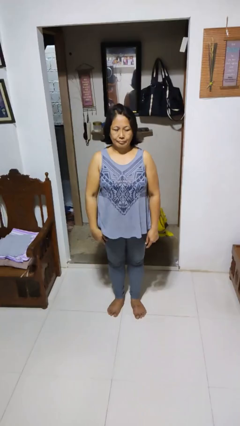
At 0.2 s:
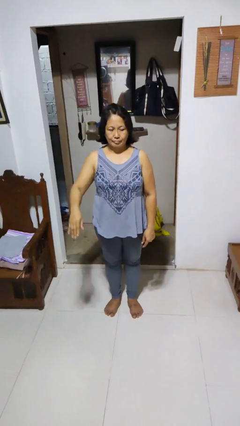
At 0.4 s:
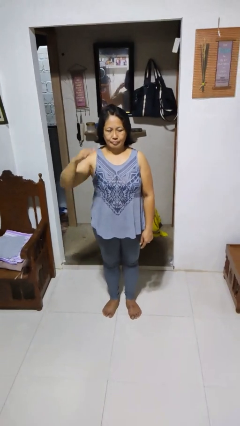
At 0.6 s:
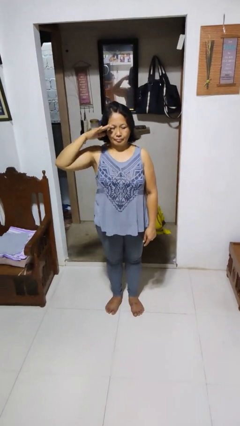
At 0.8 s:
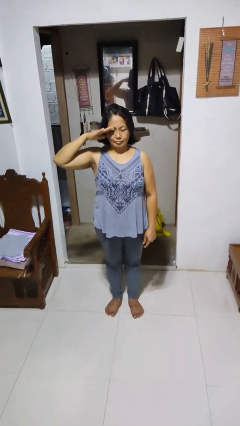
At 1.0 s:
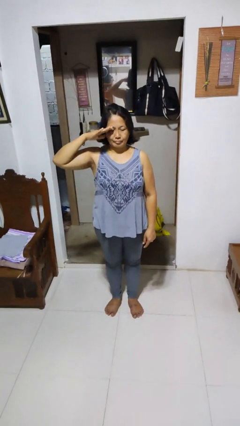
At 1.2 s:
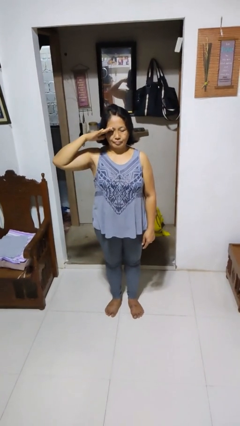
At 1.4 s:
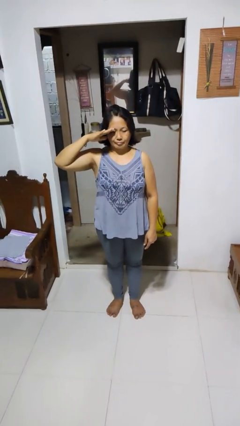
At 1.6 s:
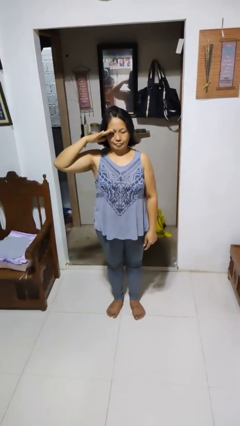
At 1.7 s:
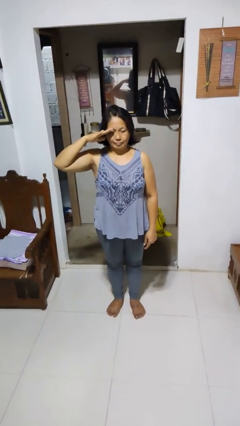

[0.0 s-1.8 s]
person salutes

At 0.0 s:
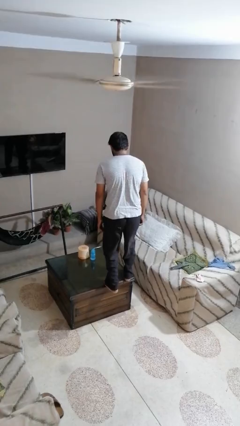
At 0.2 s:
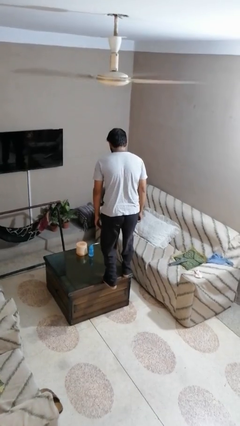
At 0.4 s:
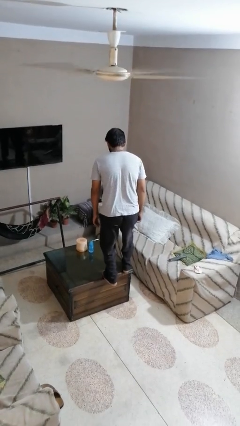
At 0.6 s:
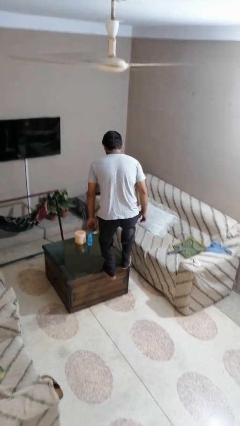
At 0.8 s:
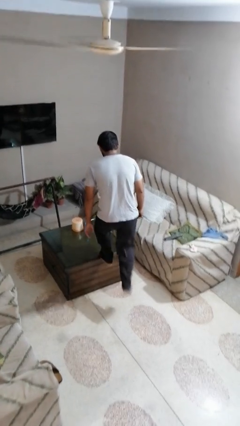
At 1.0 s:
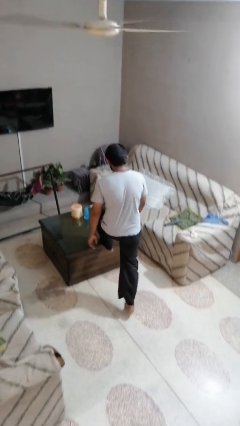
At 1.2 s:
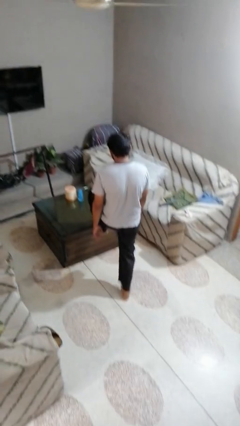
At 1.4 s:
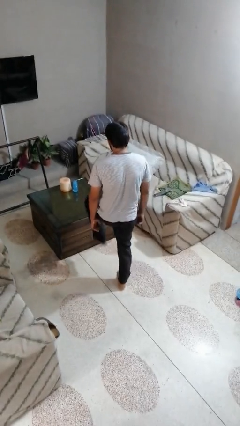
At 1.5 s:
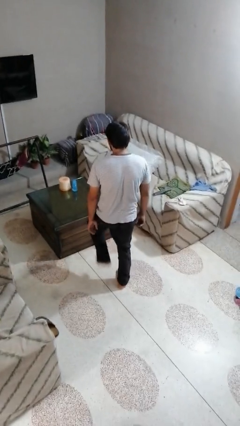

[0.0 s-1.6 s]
person climbs off table

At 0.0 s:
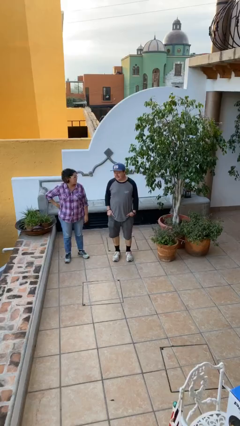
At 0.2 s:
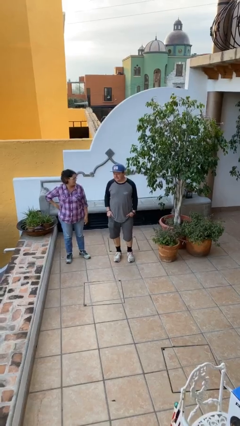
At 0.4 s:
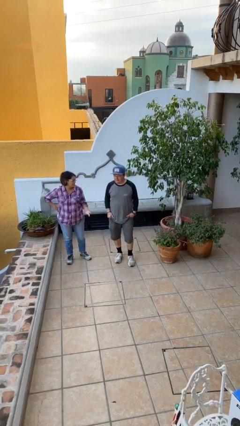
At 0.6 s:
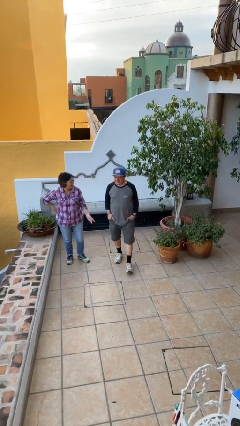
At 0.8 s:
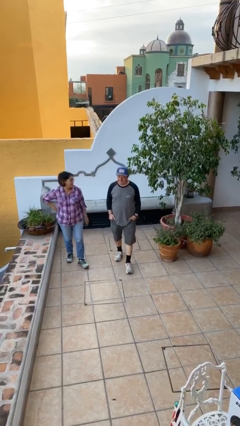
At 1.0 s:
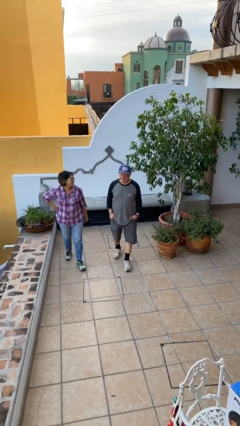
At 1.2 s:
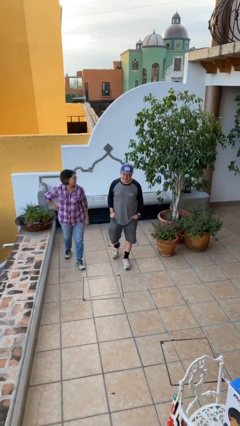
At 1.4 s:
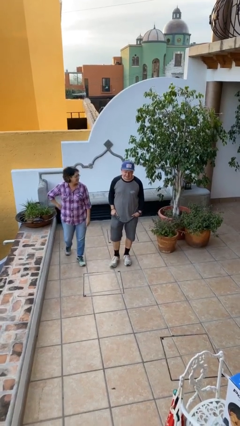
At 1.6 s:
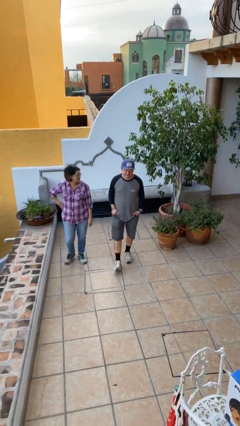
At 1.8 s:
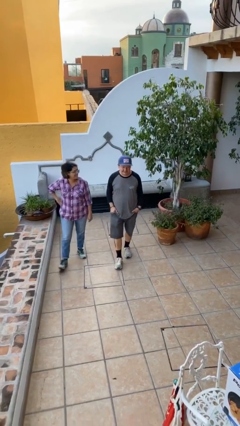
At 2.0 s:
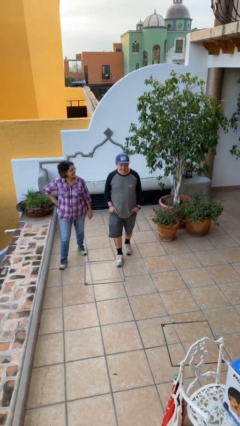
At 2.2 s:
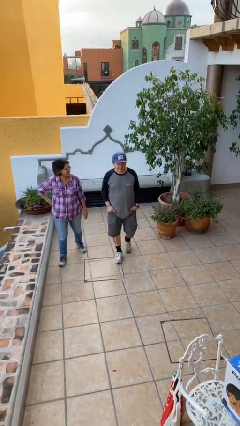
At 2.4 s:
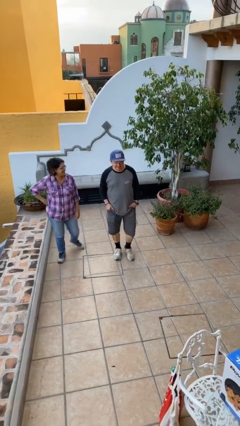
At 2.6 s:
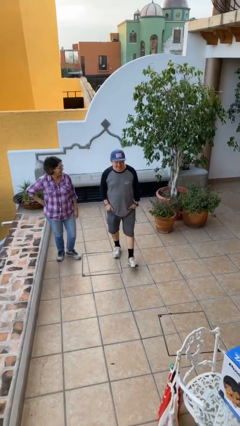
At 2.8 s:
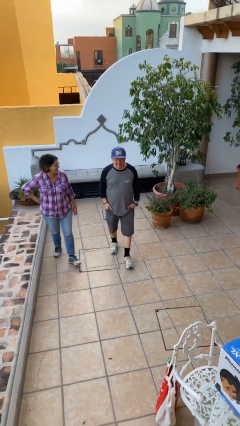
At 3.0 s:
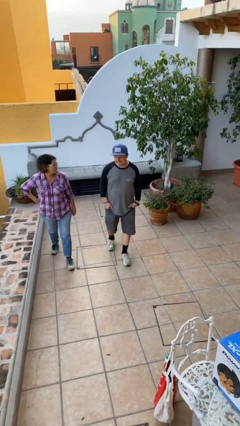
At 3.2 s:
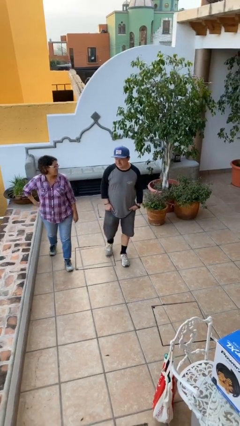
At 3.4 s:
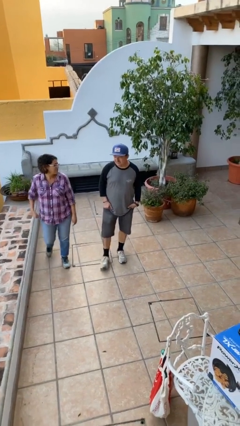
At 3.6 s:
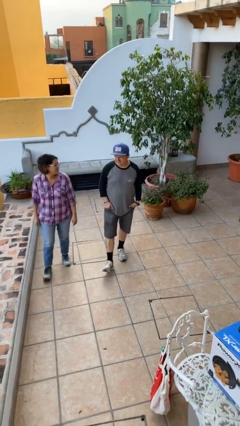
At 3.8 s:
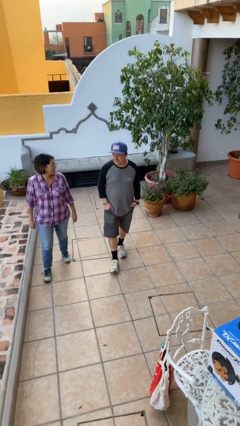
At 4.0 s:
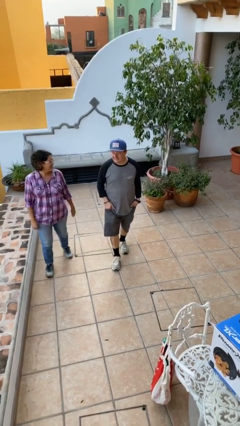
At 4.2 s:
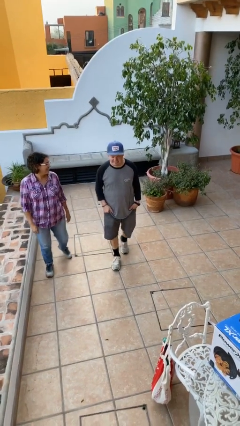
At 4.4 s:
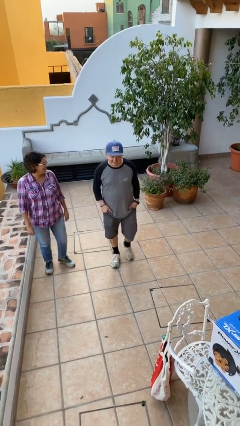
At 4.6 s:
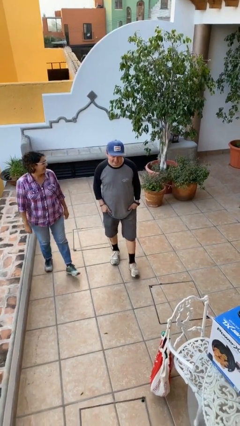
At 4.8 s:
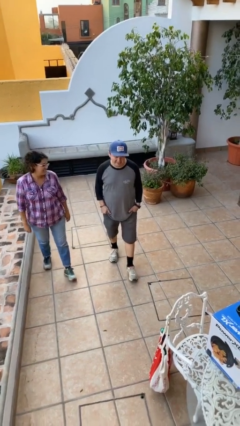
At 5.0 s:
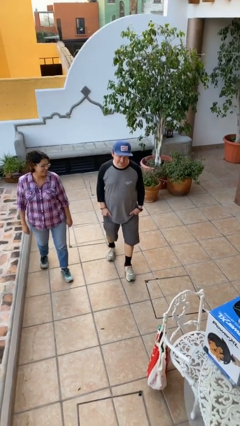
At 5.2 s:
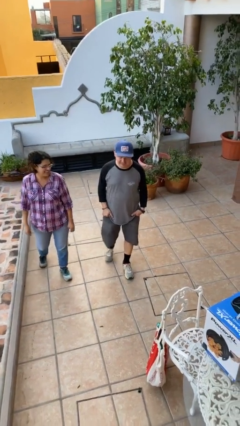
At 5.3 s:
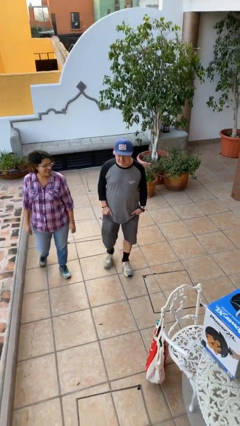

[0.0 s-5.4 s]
person talks to person

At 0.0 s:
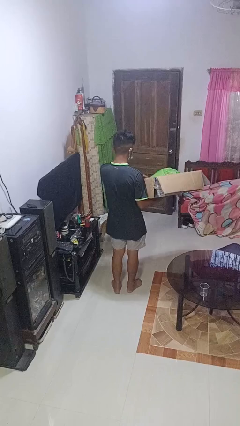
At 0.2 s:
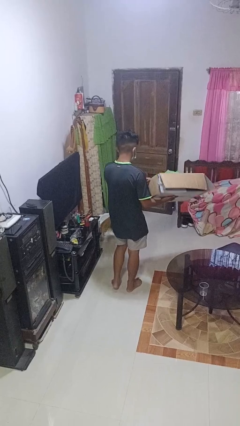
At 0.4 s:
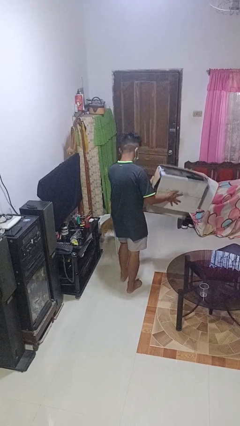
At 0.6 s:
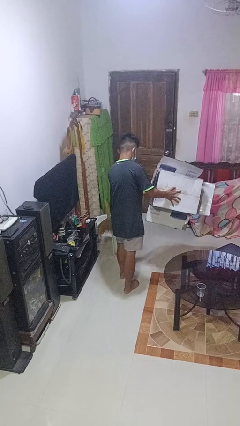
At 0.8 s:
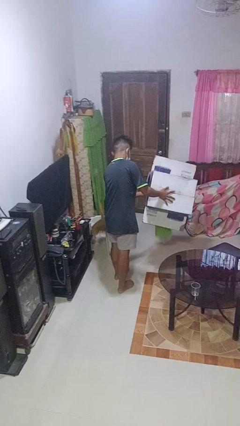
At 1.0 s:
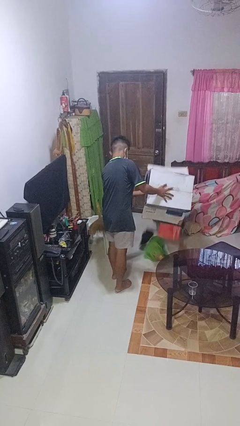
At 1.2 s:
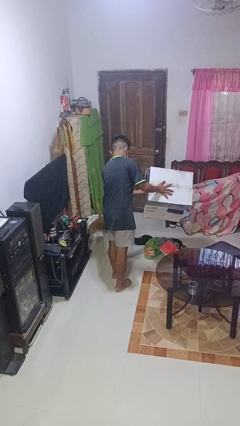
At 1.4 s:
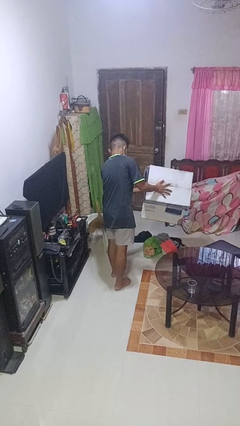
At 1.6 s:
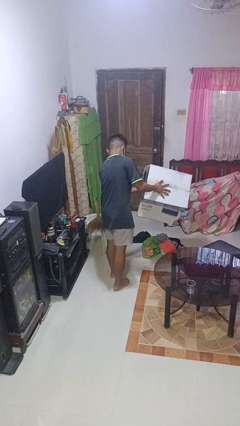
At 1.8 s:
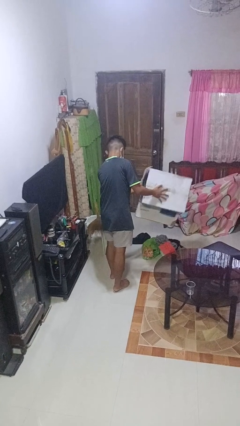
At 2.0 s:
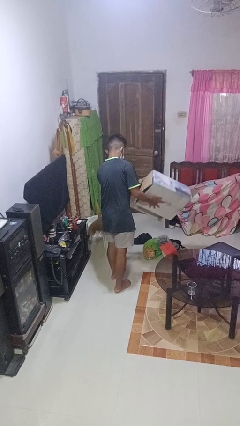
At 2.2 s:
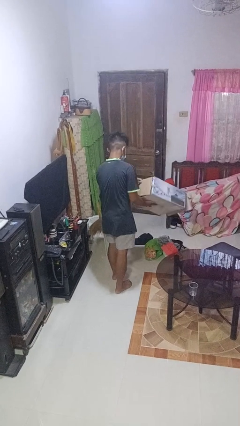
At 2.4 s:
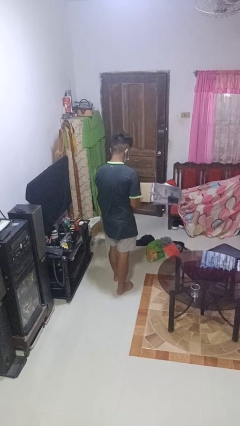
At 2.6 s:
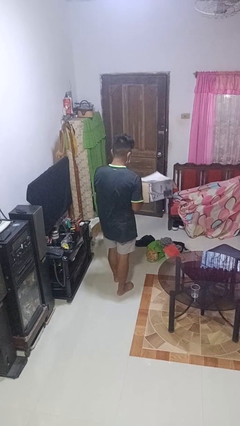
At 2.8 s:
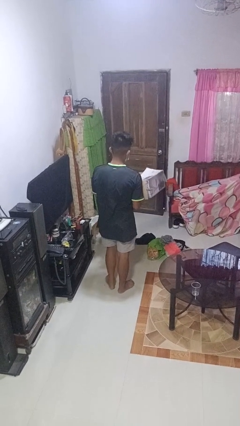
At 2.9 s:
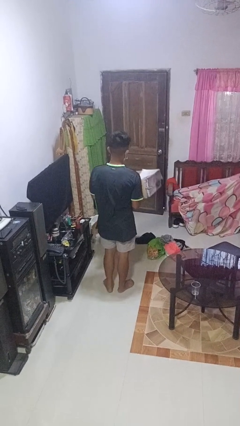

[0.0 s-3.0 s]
person unloads box onto floor

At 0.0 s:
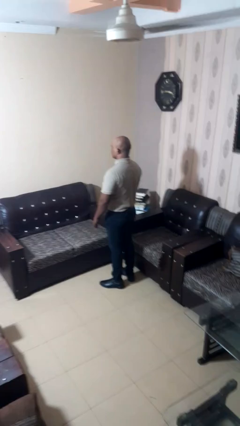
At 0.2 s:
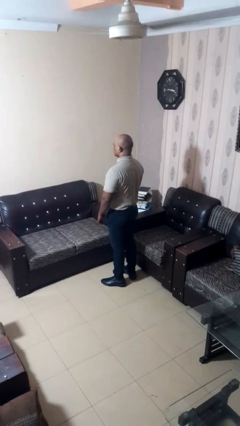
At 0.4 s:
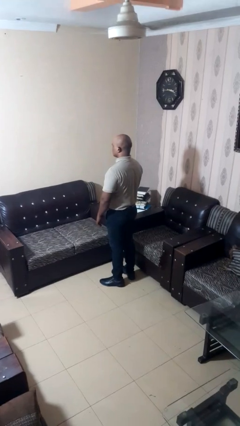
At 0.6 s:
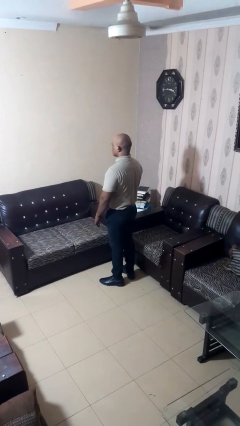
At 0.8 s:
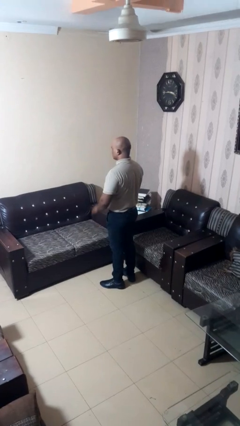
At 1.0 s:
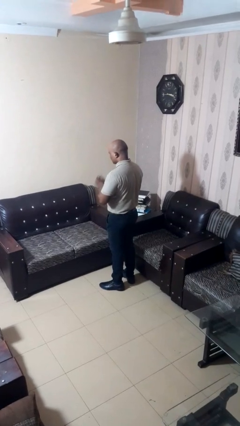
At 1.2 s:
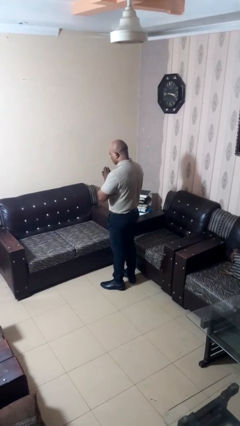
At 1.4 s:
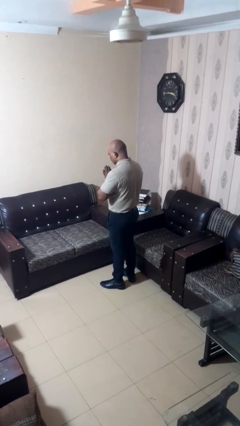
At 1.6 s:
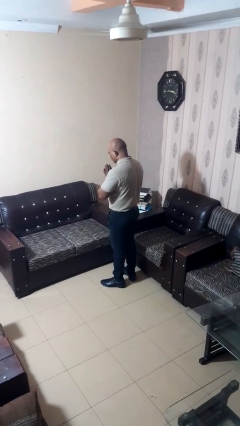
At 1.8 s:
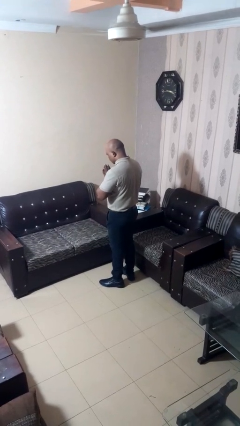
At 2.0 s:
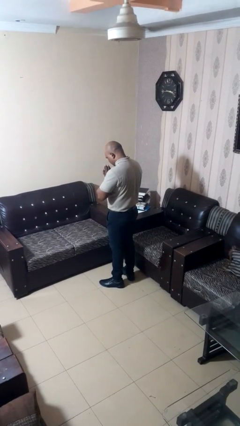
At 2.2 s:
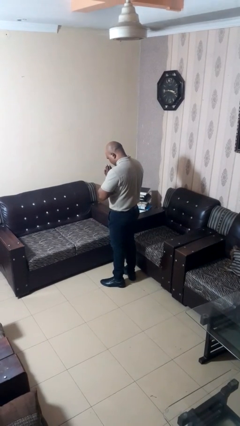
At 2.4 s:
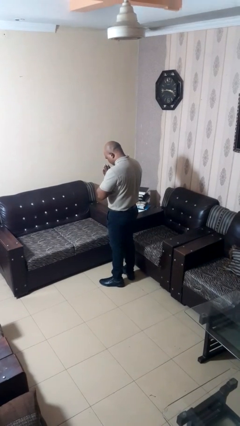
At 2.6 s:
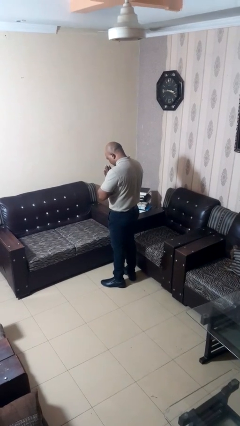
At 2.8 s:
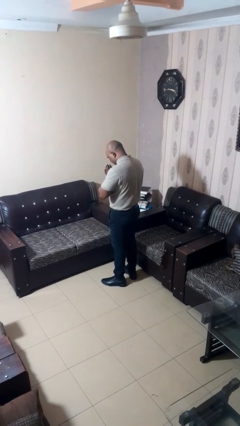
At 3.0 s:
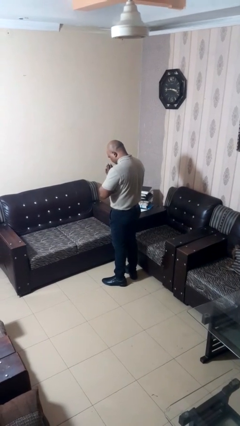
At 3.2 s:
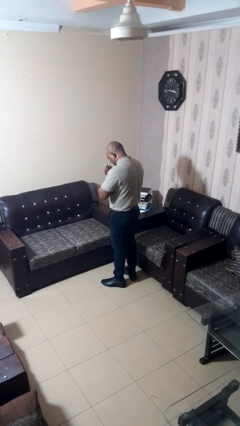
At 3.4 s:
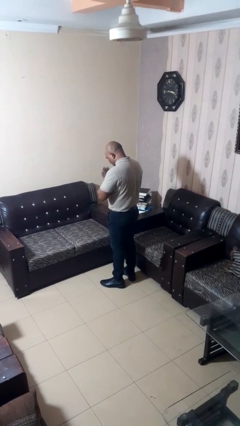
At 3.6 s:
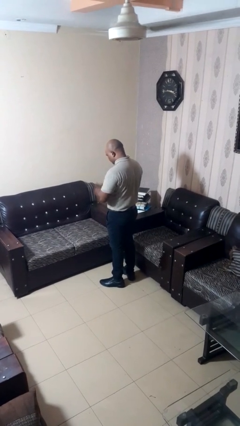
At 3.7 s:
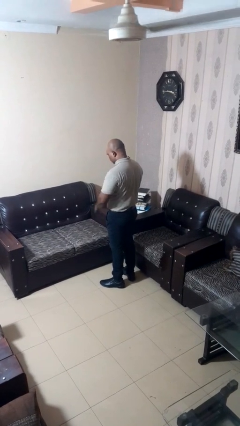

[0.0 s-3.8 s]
person prays

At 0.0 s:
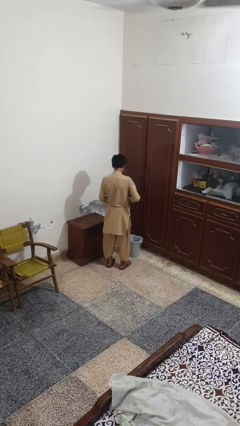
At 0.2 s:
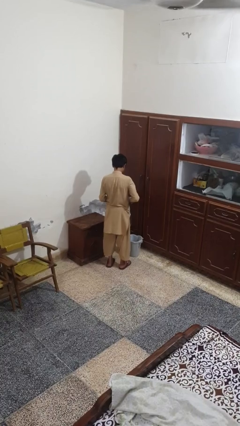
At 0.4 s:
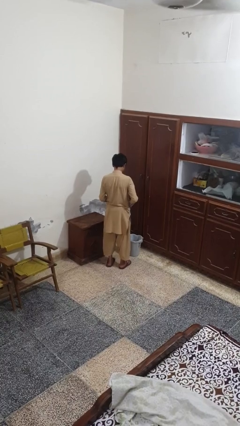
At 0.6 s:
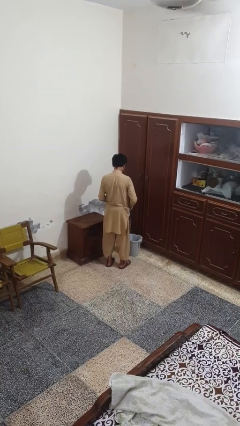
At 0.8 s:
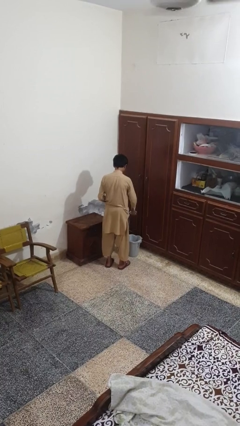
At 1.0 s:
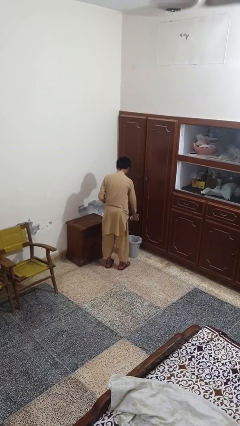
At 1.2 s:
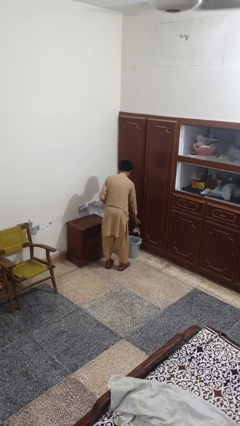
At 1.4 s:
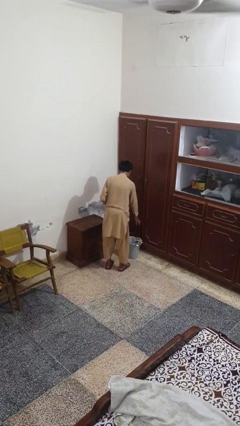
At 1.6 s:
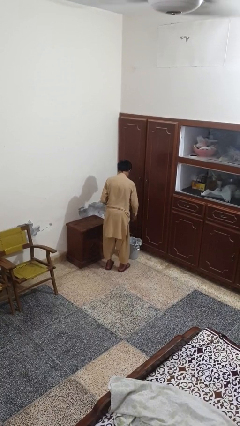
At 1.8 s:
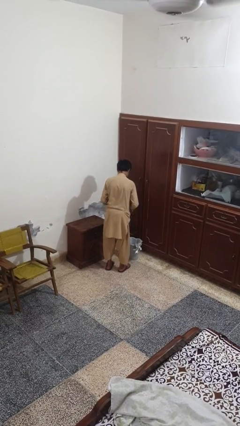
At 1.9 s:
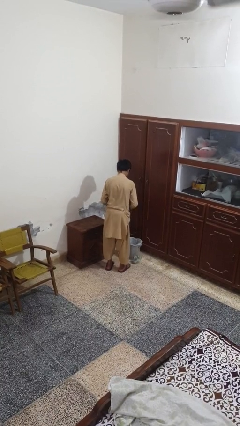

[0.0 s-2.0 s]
person discards trash
